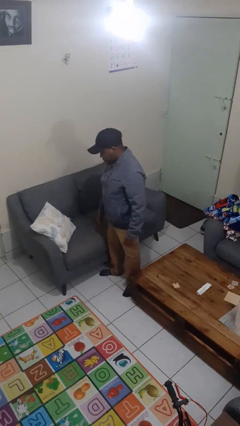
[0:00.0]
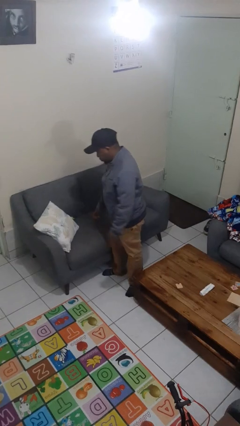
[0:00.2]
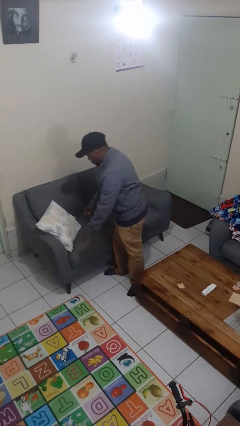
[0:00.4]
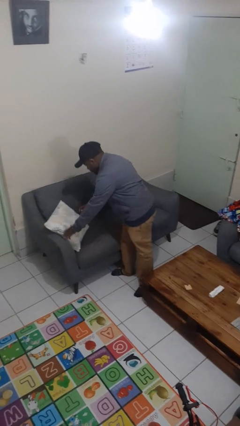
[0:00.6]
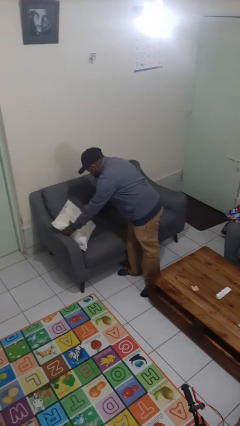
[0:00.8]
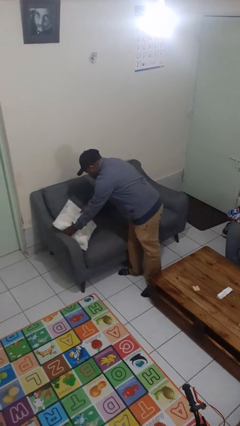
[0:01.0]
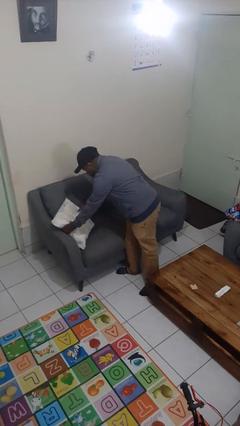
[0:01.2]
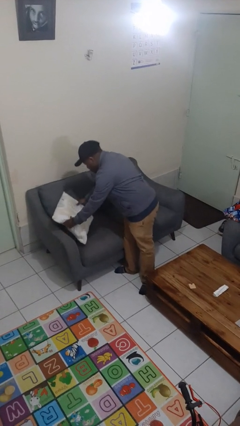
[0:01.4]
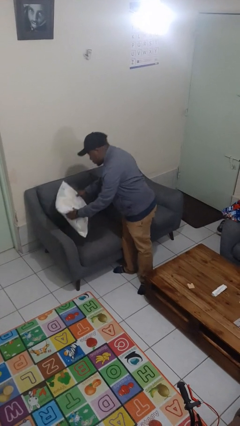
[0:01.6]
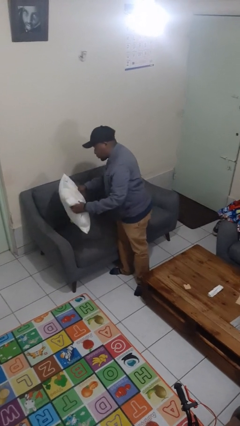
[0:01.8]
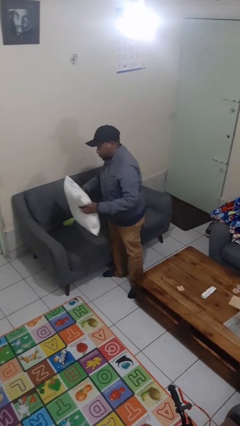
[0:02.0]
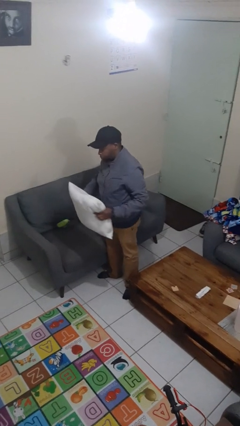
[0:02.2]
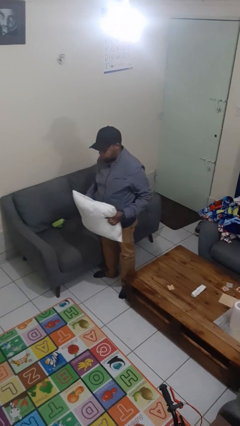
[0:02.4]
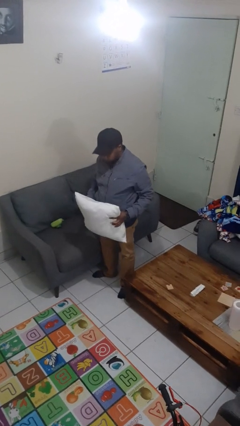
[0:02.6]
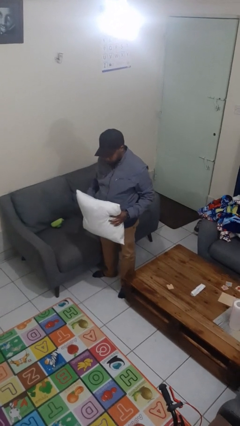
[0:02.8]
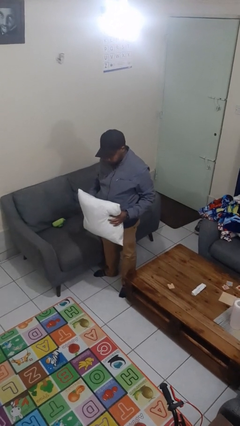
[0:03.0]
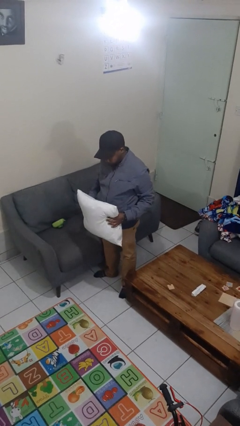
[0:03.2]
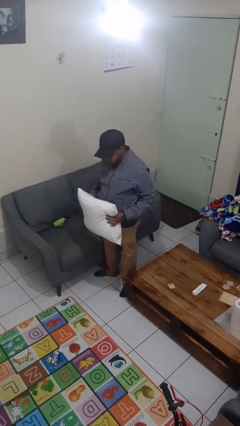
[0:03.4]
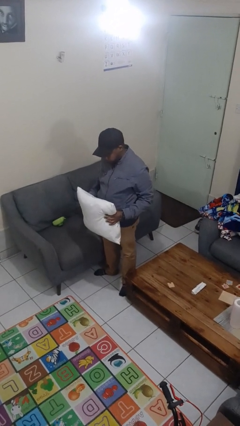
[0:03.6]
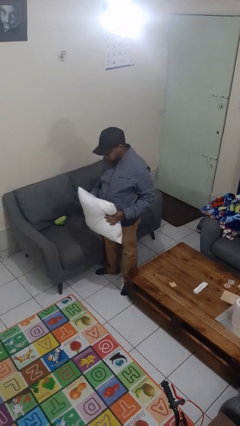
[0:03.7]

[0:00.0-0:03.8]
person picks up object from couch

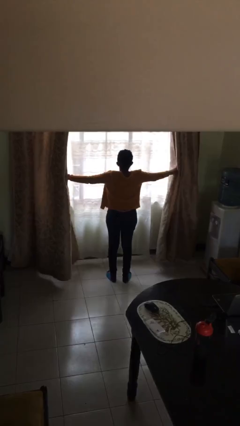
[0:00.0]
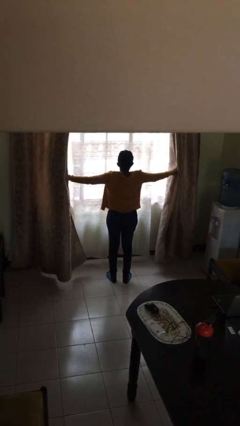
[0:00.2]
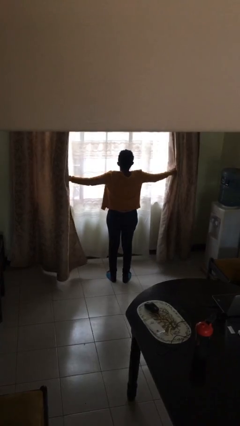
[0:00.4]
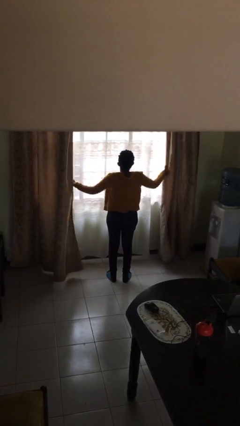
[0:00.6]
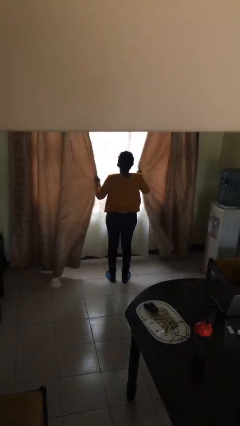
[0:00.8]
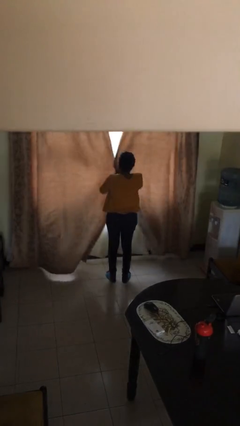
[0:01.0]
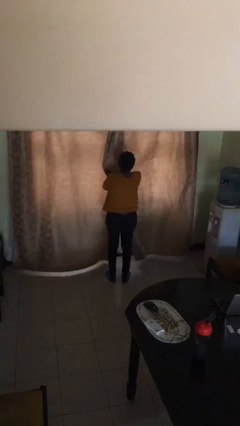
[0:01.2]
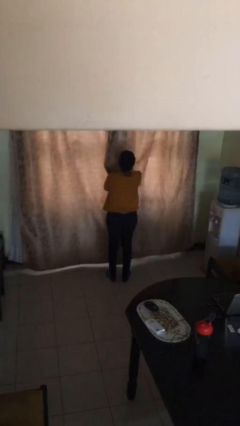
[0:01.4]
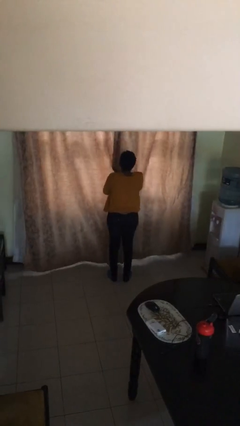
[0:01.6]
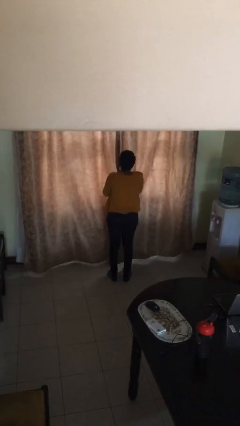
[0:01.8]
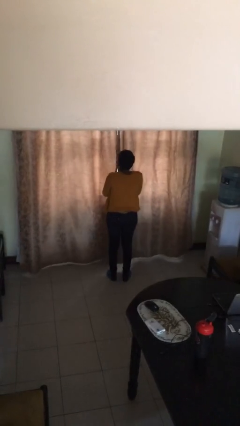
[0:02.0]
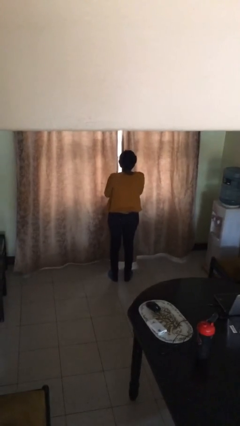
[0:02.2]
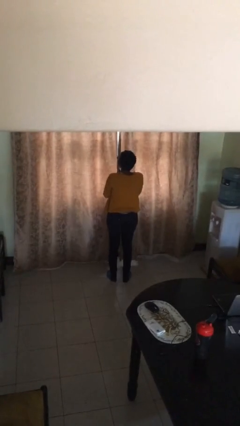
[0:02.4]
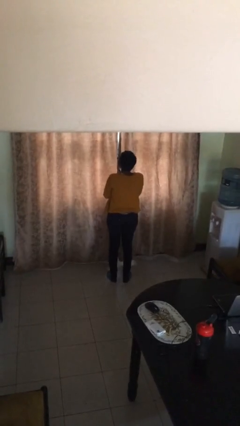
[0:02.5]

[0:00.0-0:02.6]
person closes curtains

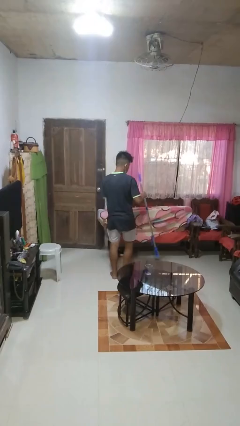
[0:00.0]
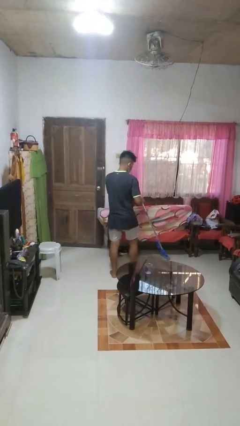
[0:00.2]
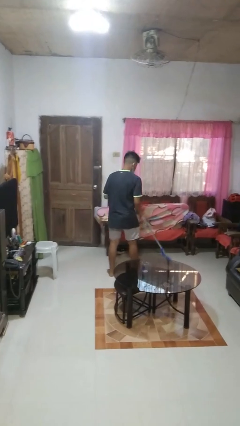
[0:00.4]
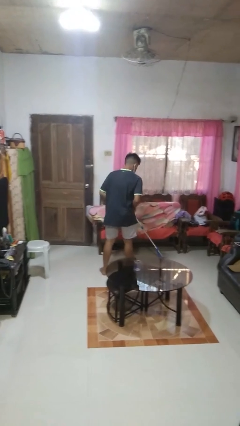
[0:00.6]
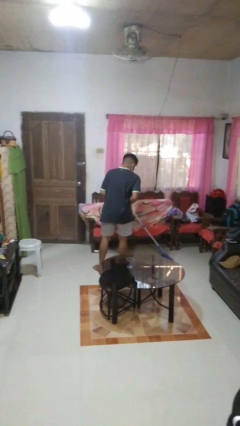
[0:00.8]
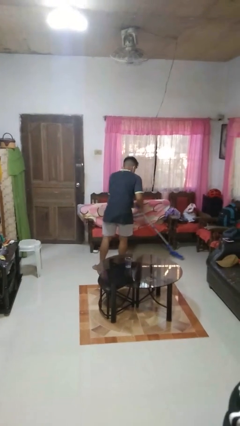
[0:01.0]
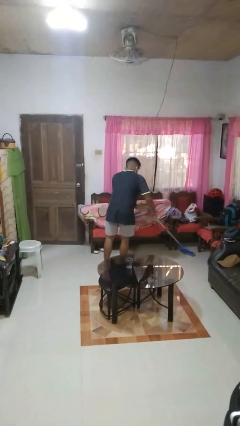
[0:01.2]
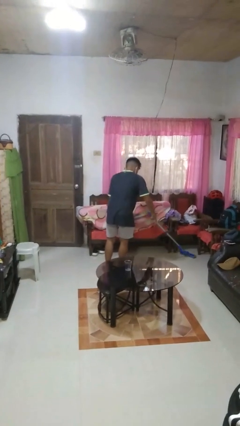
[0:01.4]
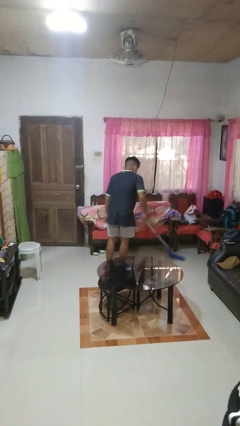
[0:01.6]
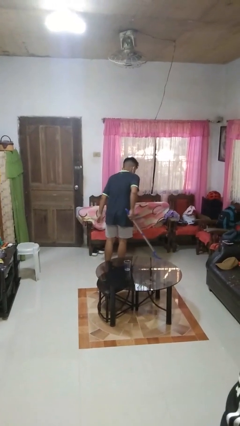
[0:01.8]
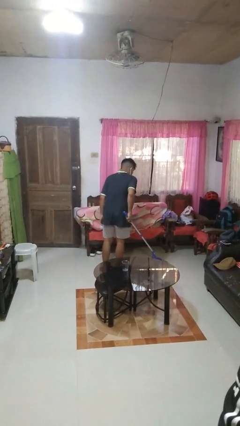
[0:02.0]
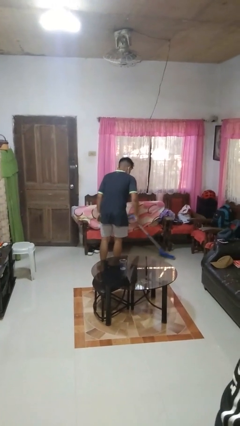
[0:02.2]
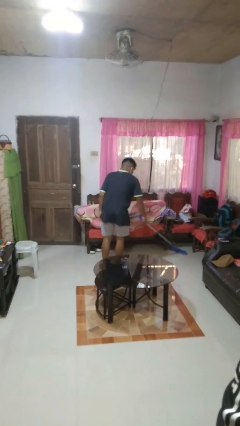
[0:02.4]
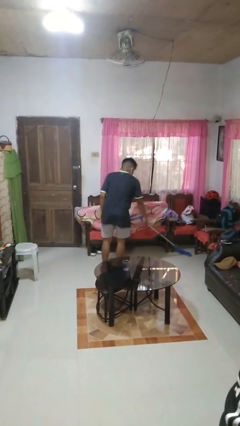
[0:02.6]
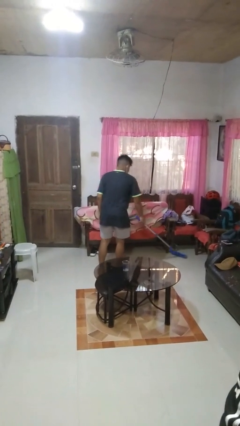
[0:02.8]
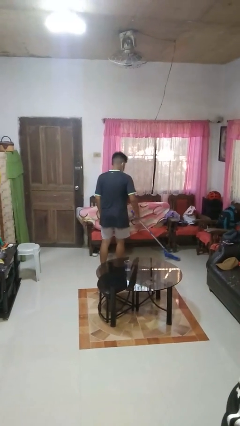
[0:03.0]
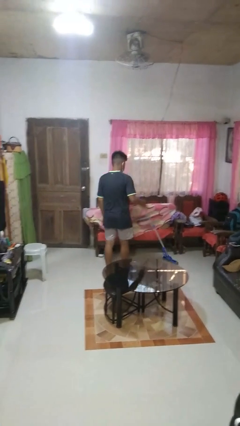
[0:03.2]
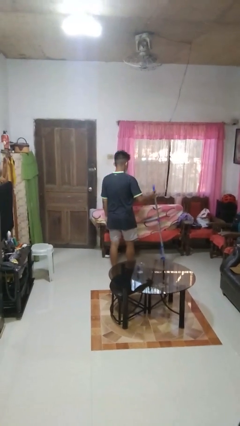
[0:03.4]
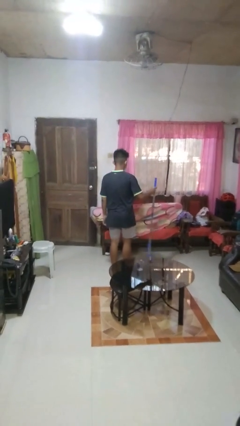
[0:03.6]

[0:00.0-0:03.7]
person mops

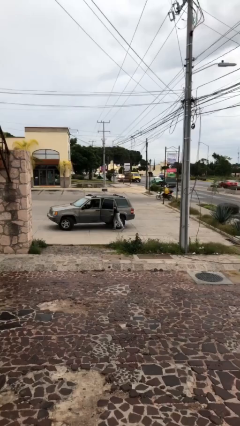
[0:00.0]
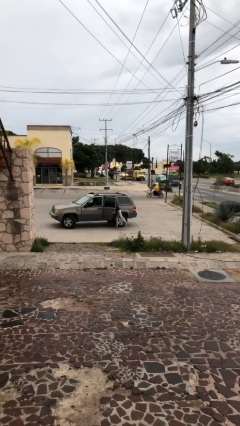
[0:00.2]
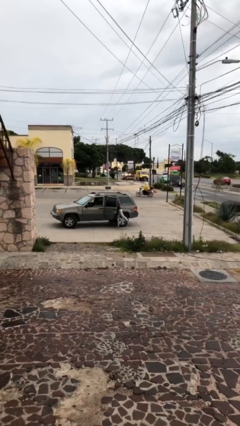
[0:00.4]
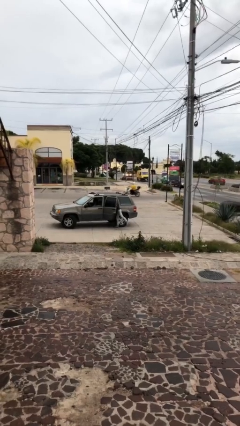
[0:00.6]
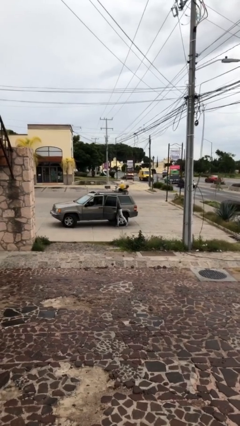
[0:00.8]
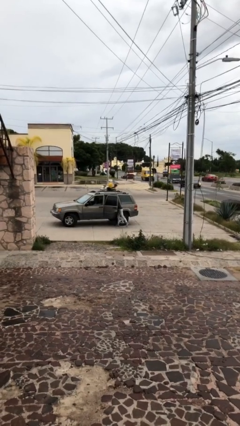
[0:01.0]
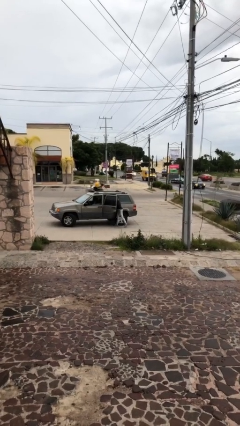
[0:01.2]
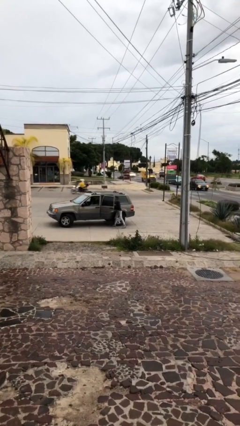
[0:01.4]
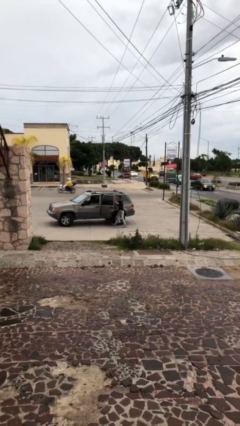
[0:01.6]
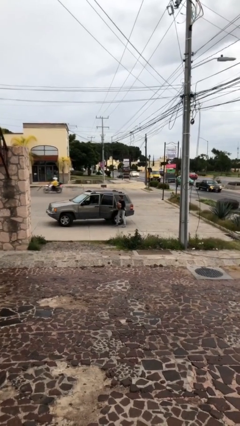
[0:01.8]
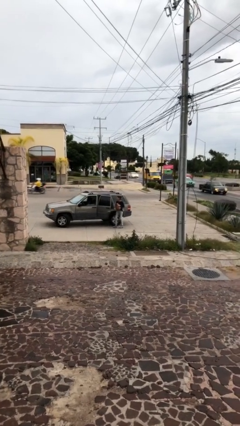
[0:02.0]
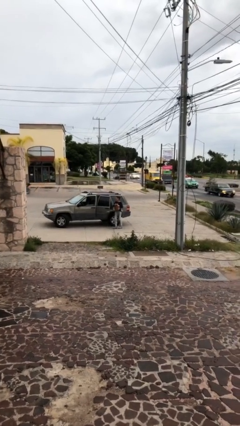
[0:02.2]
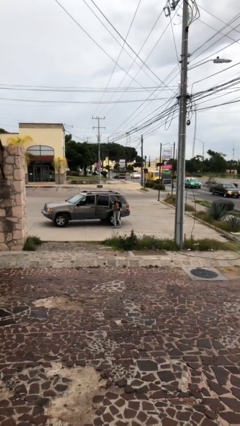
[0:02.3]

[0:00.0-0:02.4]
person unloads car

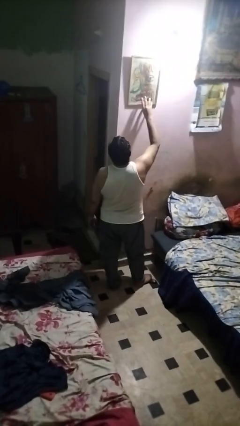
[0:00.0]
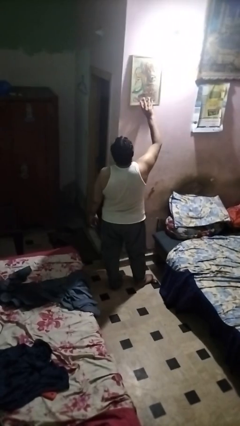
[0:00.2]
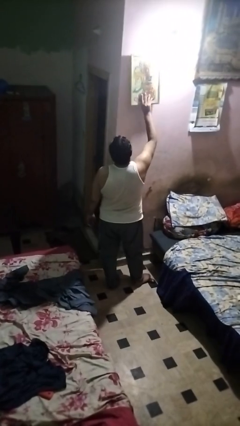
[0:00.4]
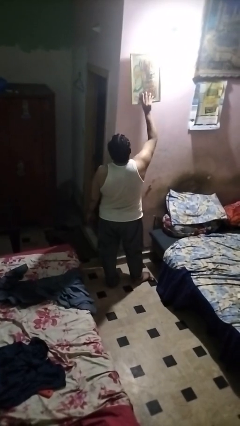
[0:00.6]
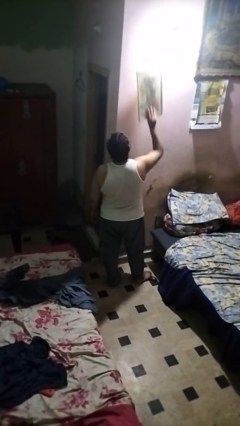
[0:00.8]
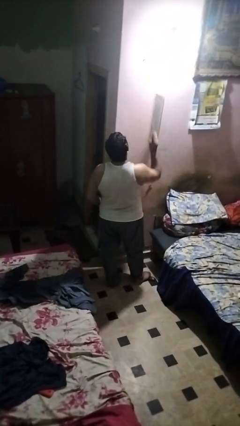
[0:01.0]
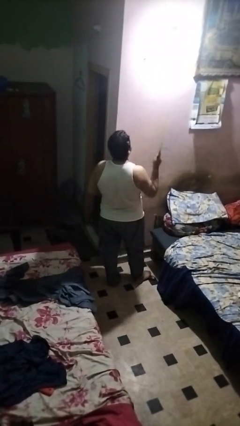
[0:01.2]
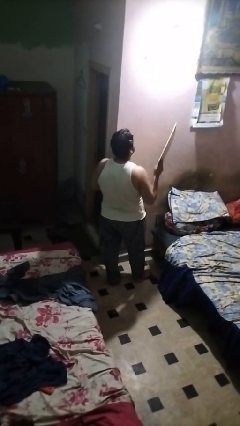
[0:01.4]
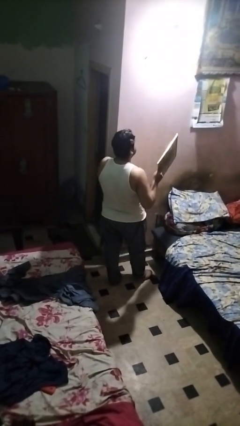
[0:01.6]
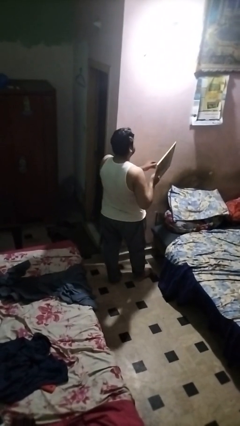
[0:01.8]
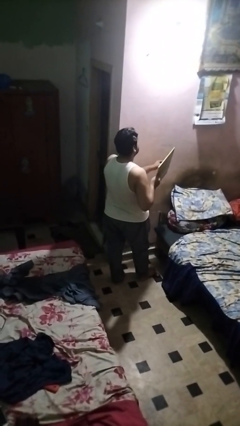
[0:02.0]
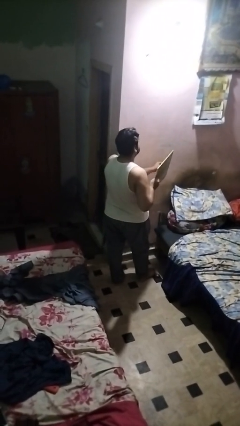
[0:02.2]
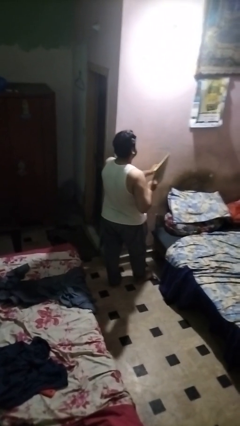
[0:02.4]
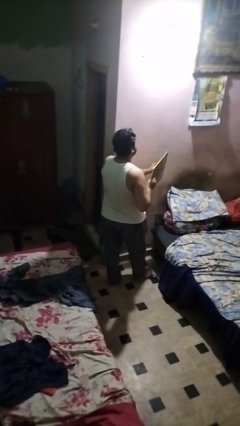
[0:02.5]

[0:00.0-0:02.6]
person takes down picture frame

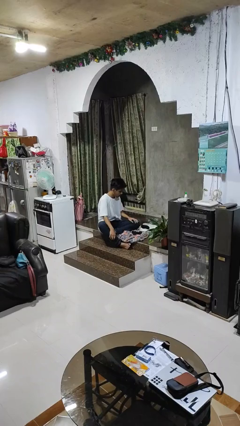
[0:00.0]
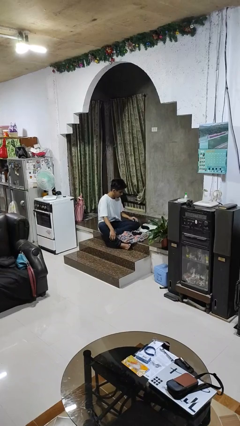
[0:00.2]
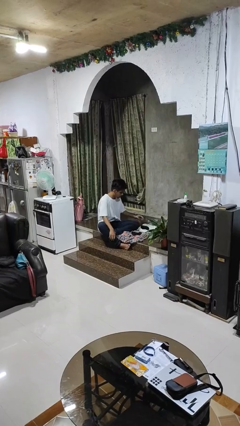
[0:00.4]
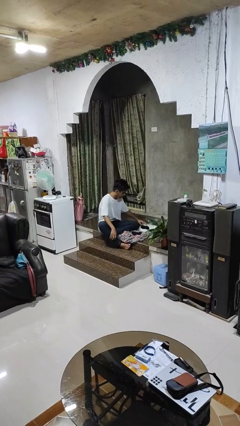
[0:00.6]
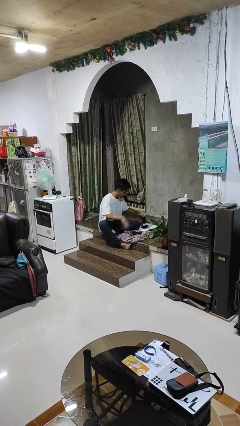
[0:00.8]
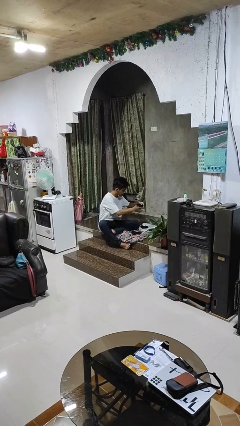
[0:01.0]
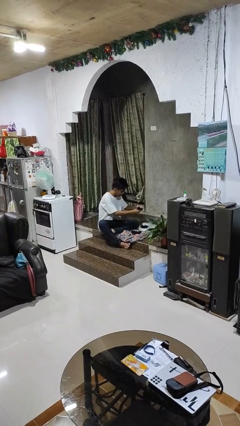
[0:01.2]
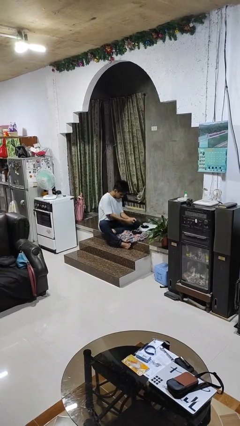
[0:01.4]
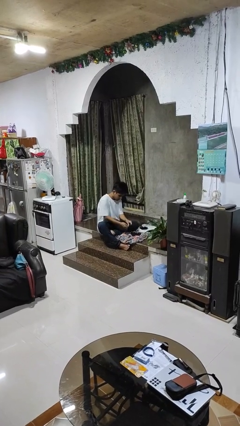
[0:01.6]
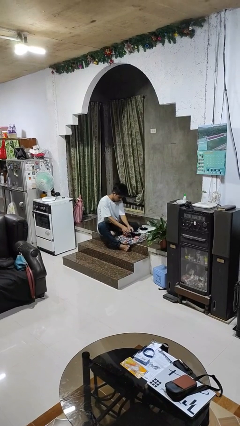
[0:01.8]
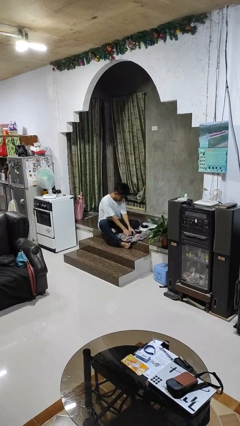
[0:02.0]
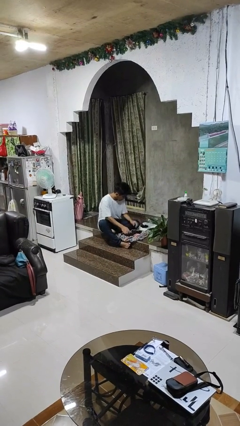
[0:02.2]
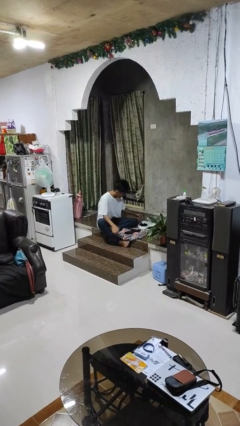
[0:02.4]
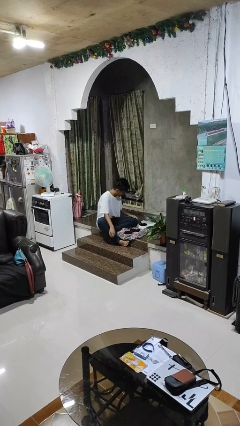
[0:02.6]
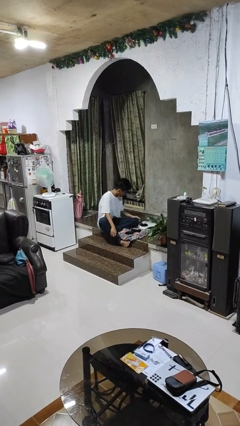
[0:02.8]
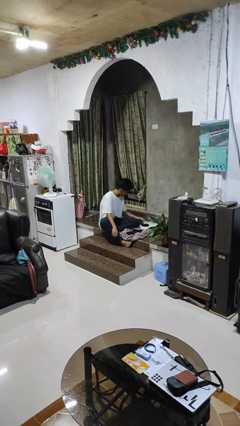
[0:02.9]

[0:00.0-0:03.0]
person folds socks
